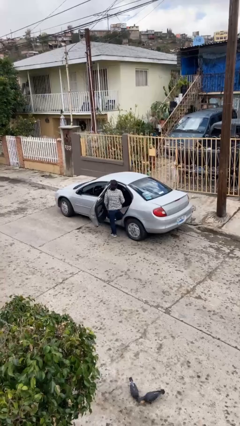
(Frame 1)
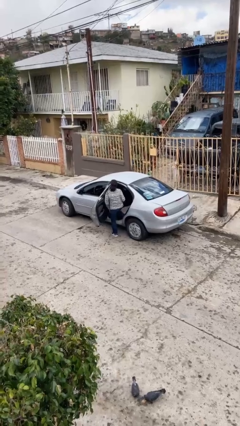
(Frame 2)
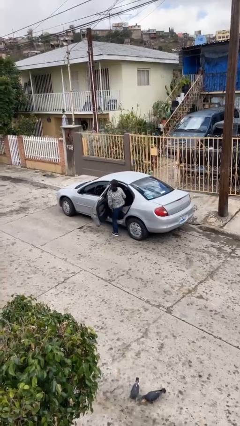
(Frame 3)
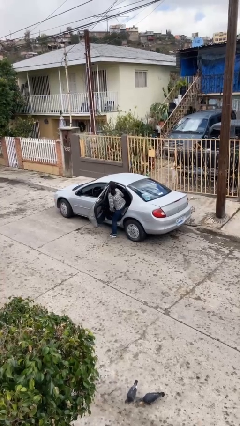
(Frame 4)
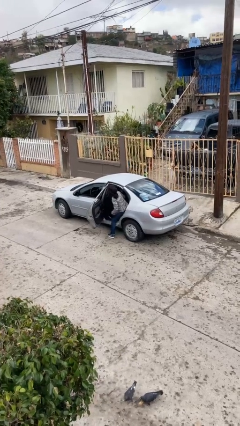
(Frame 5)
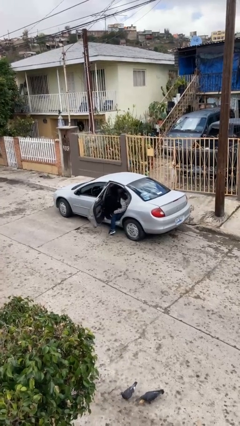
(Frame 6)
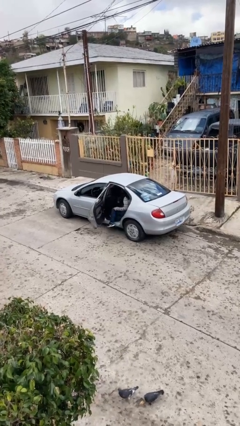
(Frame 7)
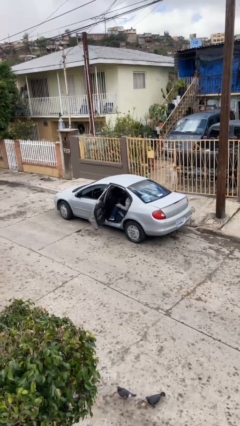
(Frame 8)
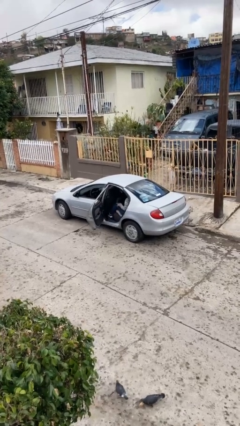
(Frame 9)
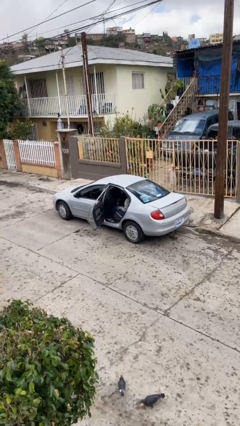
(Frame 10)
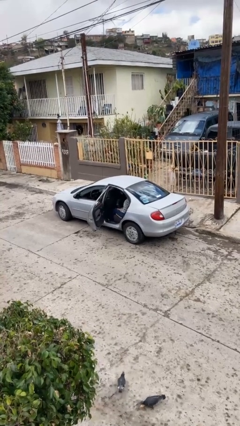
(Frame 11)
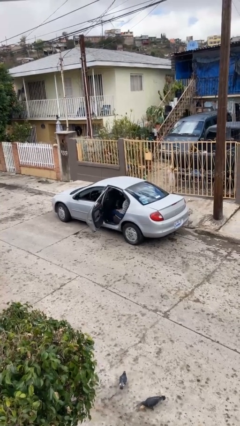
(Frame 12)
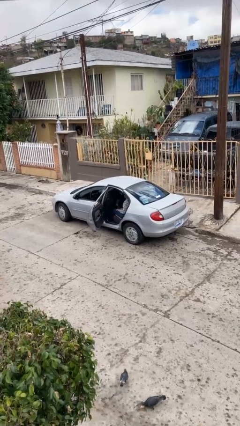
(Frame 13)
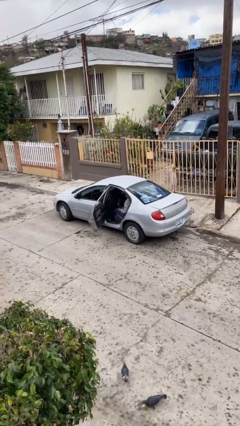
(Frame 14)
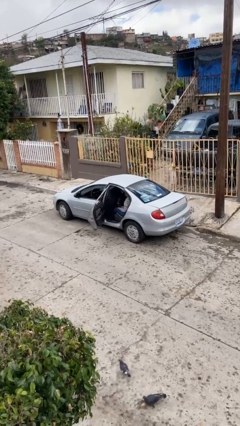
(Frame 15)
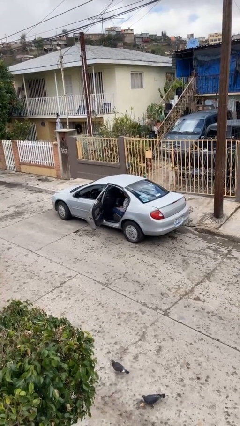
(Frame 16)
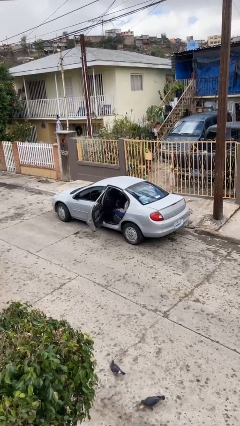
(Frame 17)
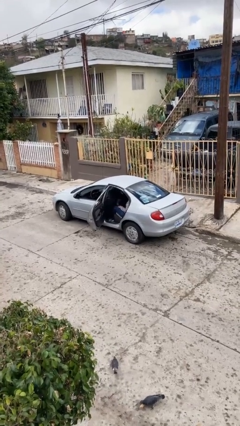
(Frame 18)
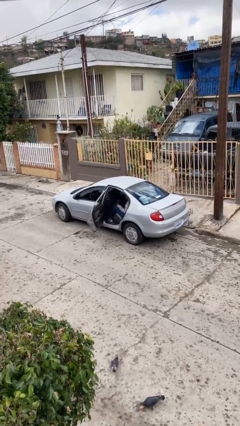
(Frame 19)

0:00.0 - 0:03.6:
person enters car

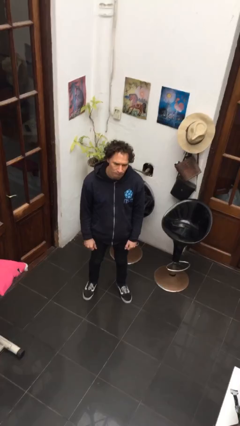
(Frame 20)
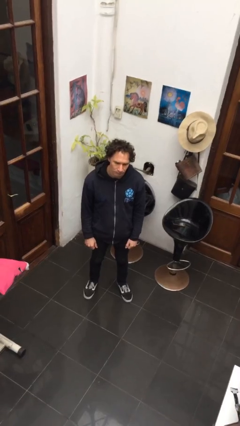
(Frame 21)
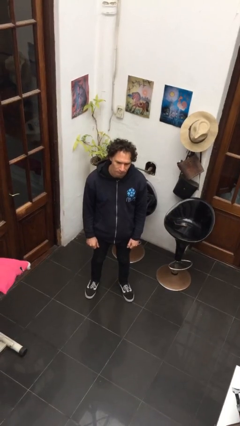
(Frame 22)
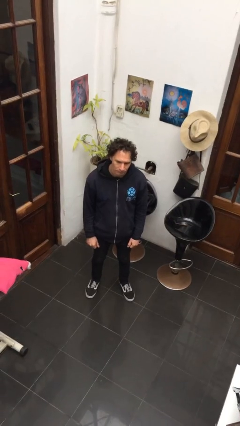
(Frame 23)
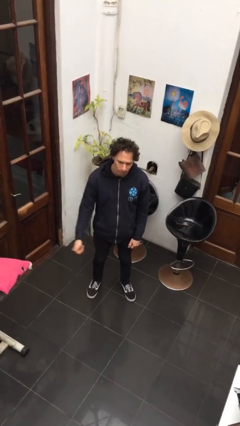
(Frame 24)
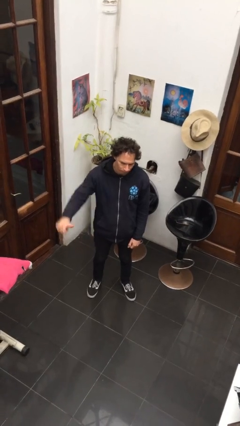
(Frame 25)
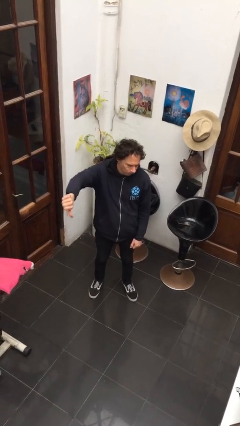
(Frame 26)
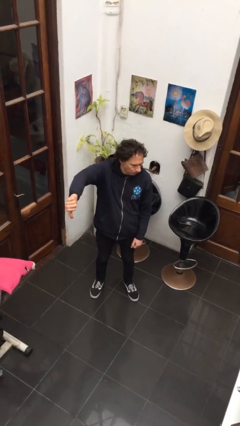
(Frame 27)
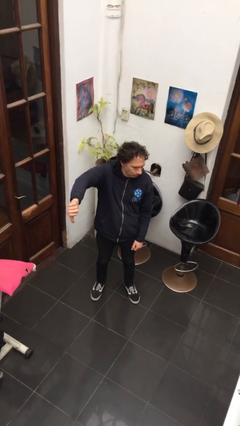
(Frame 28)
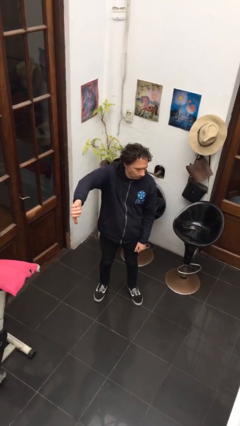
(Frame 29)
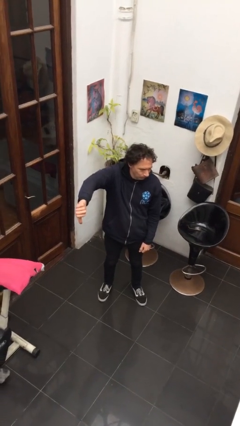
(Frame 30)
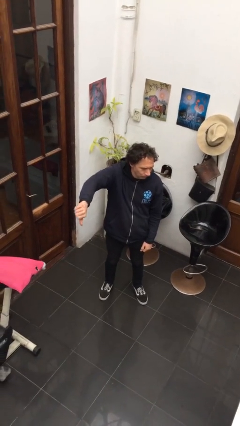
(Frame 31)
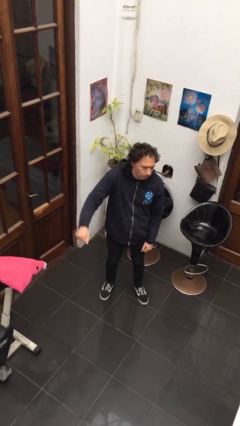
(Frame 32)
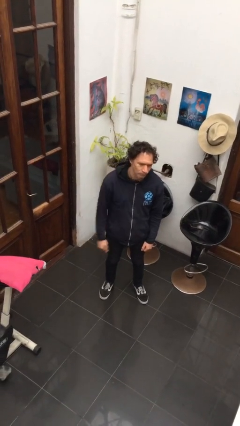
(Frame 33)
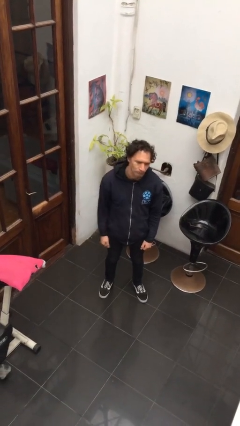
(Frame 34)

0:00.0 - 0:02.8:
person gestures thumbs down

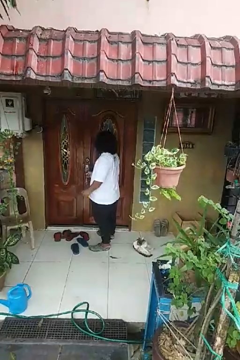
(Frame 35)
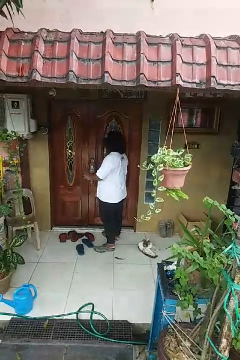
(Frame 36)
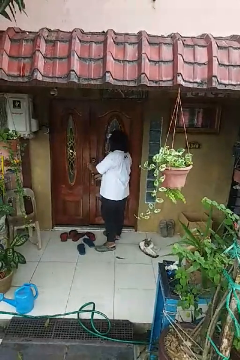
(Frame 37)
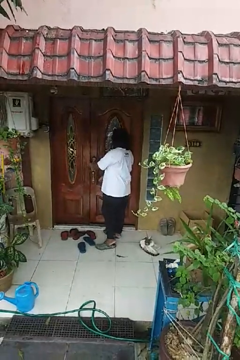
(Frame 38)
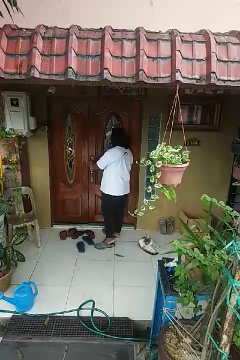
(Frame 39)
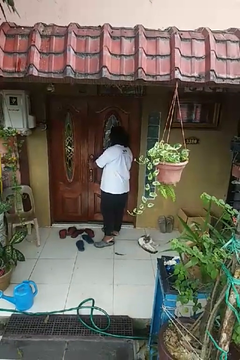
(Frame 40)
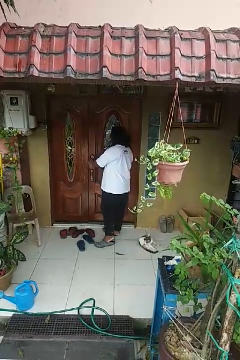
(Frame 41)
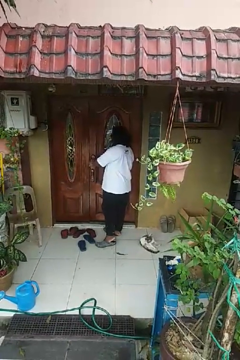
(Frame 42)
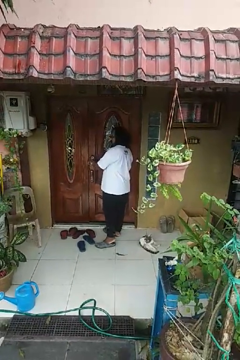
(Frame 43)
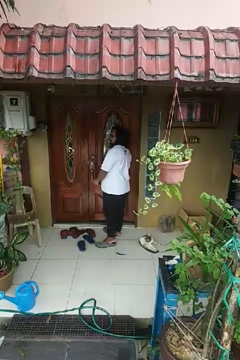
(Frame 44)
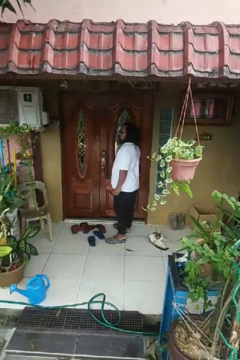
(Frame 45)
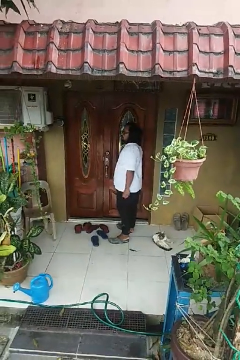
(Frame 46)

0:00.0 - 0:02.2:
person locks door with keys

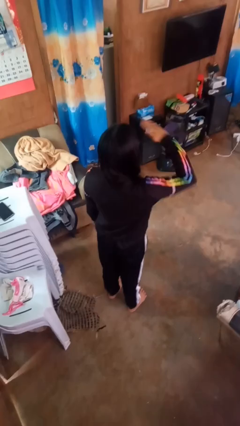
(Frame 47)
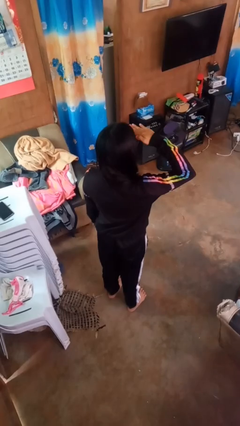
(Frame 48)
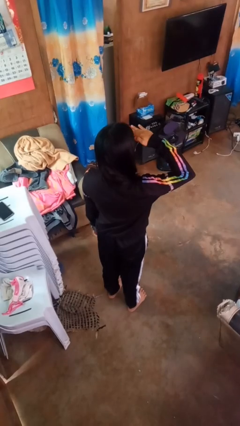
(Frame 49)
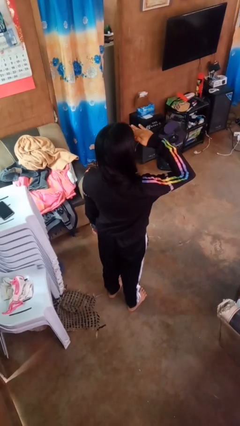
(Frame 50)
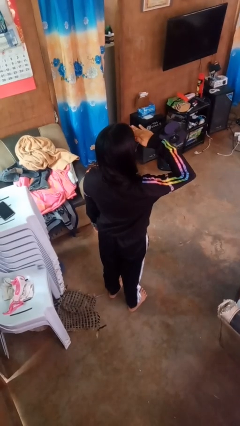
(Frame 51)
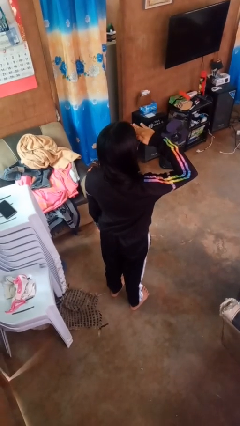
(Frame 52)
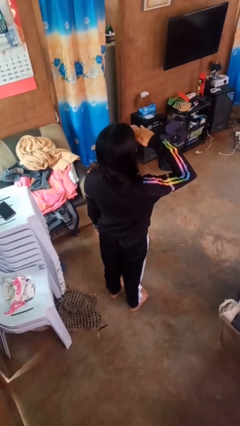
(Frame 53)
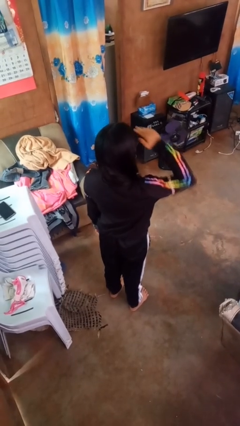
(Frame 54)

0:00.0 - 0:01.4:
person salutes

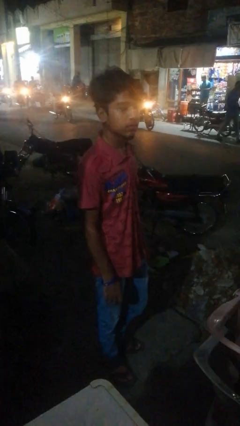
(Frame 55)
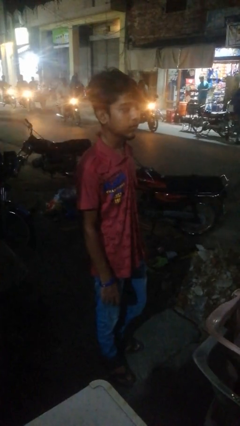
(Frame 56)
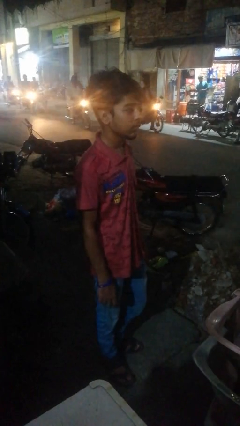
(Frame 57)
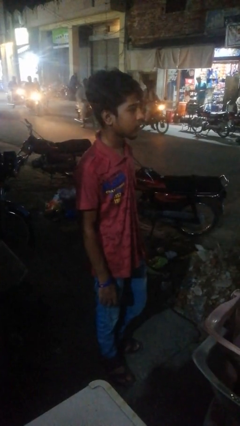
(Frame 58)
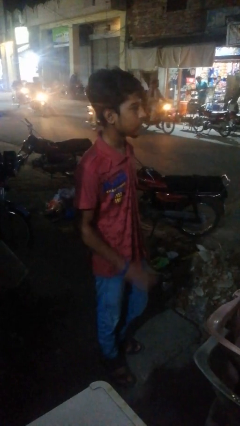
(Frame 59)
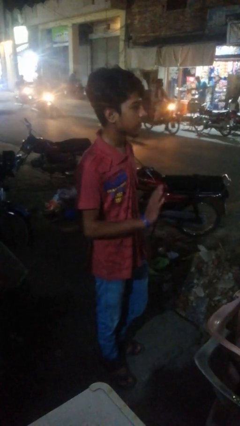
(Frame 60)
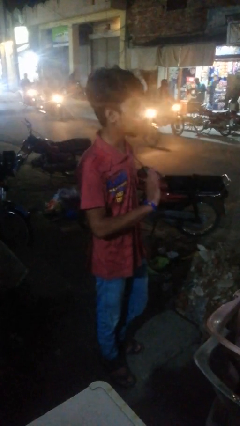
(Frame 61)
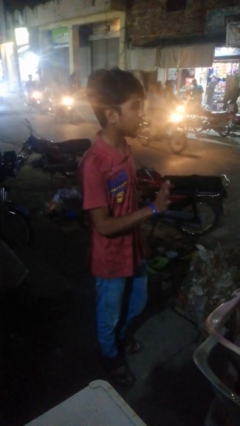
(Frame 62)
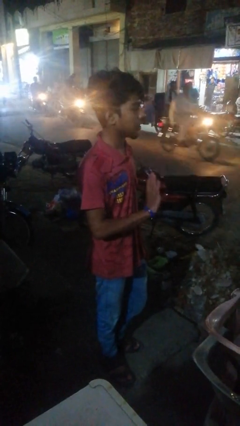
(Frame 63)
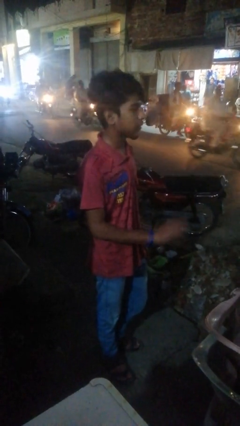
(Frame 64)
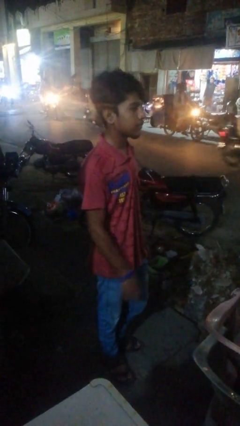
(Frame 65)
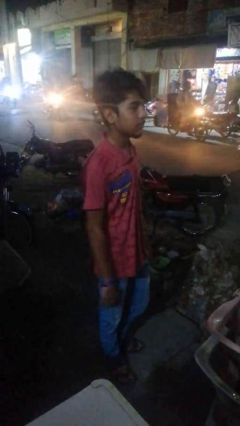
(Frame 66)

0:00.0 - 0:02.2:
person waves at person

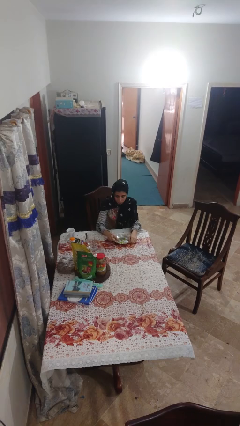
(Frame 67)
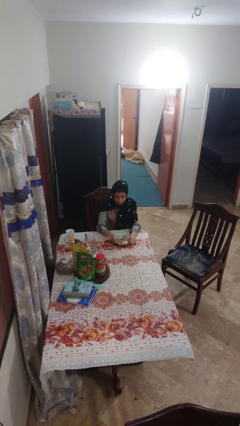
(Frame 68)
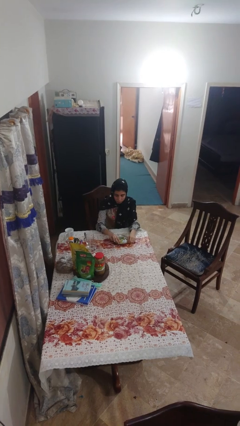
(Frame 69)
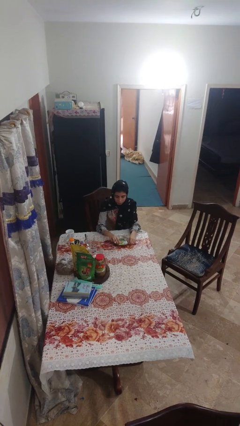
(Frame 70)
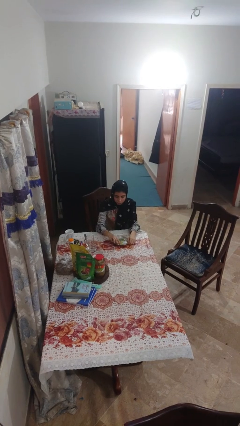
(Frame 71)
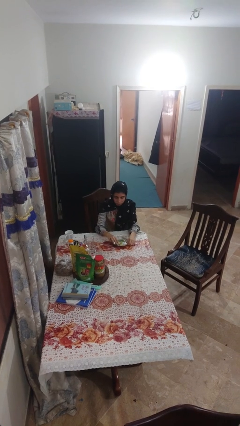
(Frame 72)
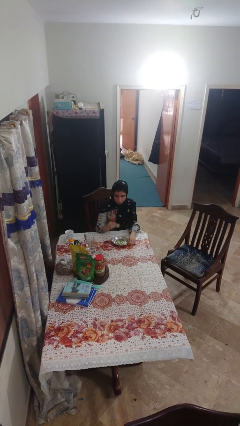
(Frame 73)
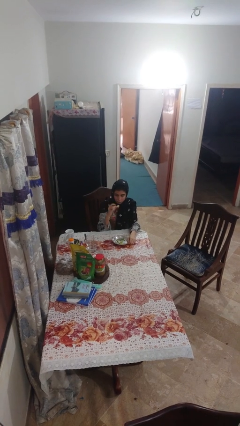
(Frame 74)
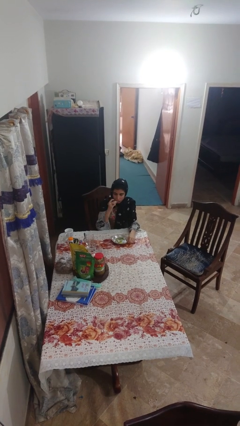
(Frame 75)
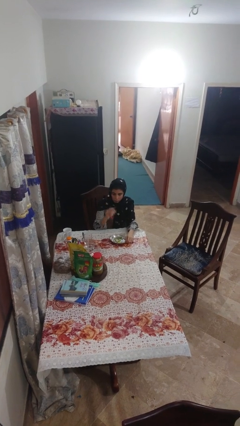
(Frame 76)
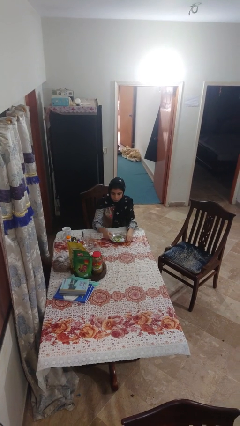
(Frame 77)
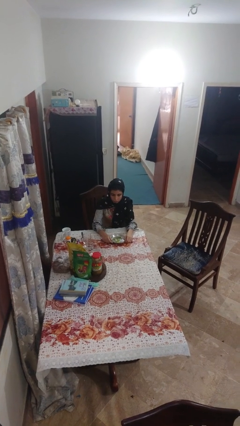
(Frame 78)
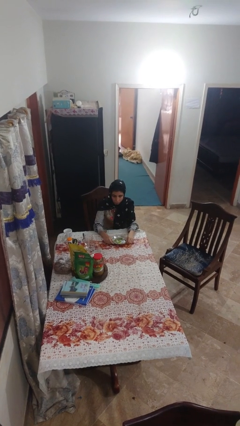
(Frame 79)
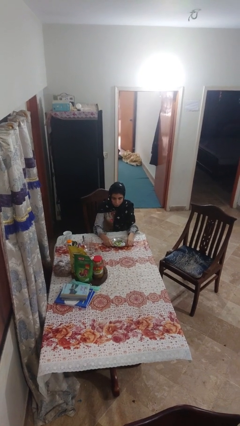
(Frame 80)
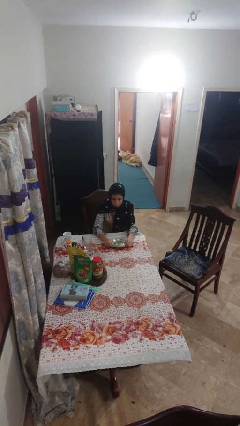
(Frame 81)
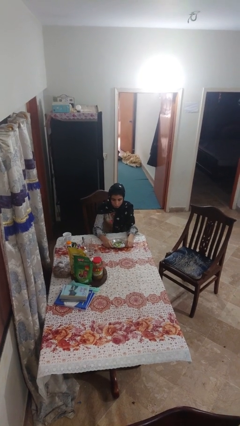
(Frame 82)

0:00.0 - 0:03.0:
person eats with hands

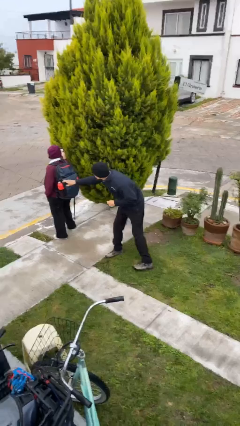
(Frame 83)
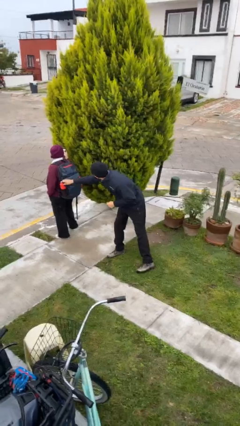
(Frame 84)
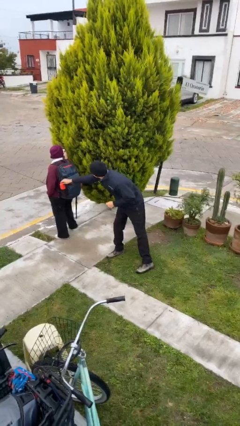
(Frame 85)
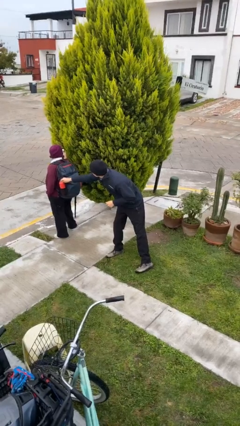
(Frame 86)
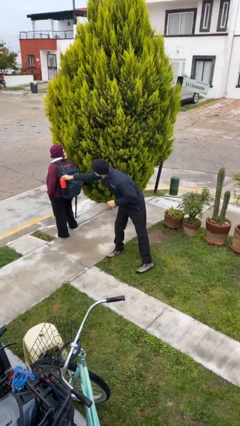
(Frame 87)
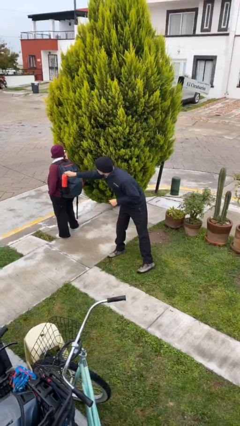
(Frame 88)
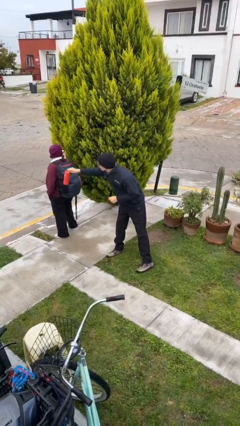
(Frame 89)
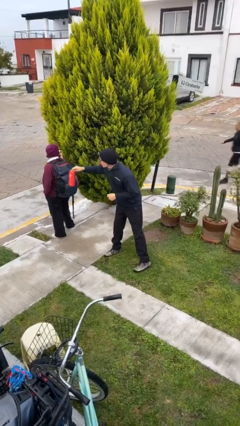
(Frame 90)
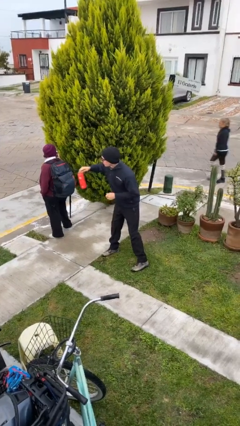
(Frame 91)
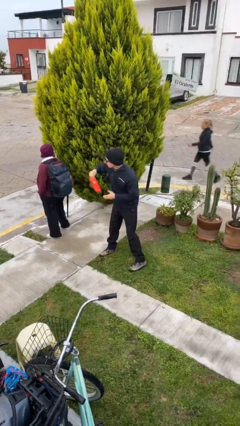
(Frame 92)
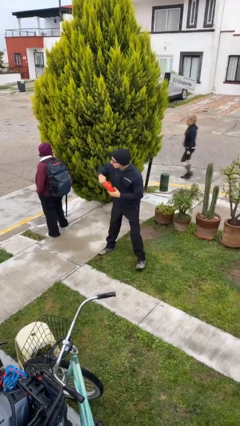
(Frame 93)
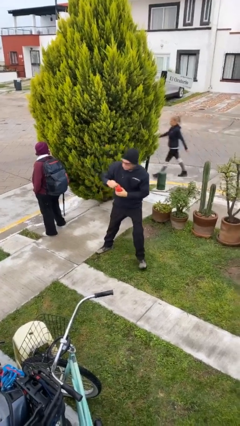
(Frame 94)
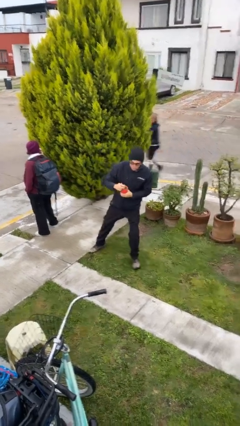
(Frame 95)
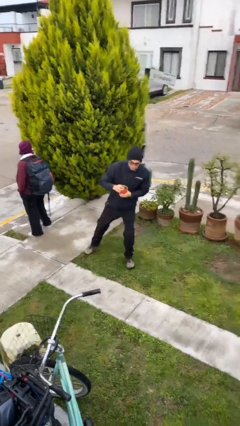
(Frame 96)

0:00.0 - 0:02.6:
person steals object from person
